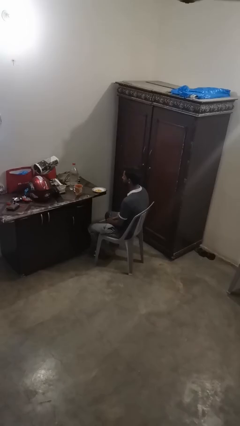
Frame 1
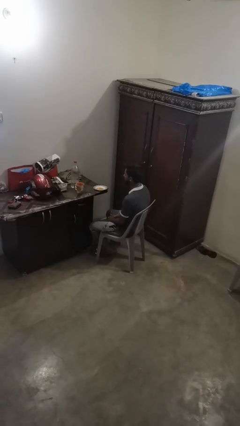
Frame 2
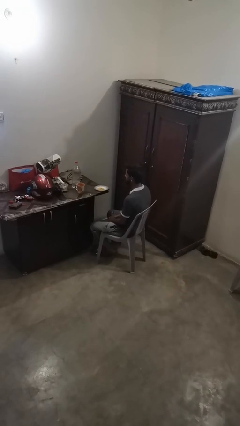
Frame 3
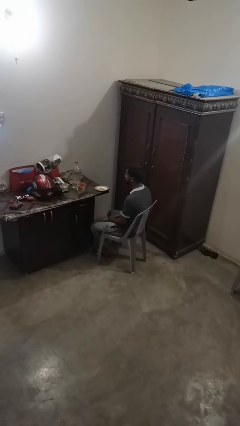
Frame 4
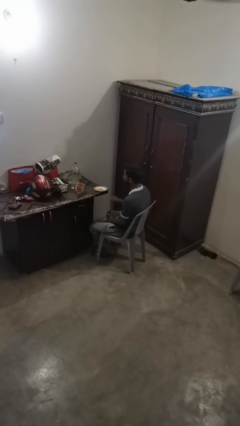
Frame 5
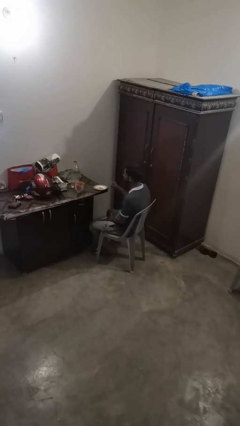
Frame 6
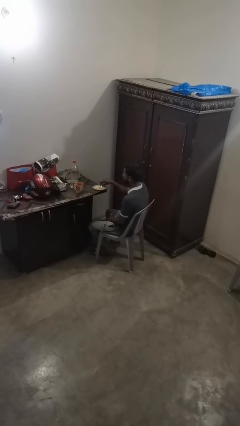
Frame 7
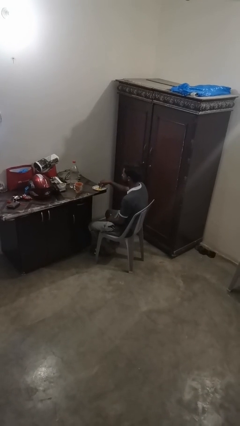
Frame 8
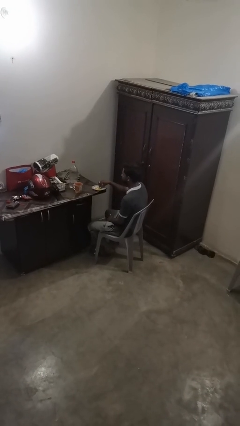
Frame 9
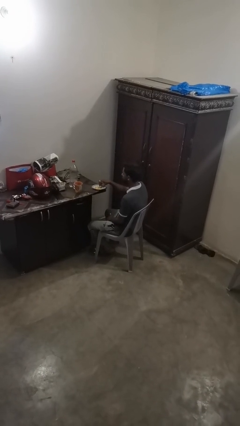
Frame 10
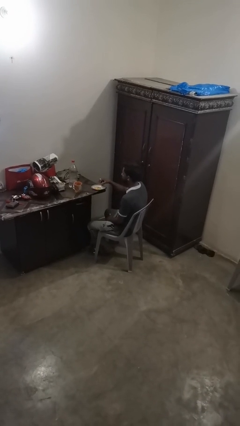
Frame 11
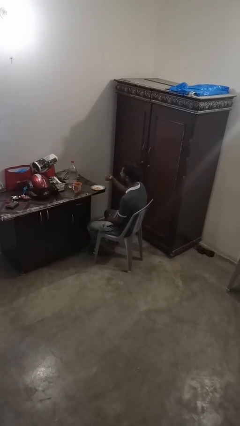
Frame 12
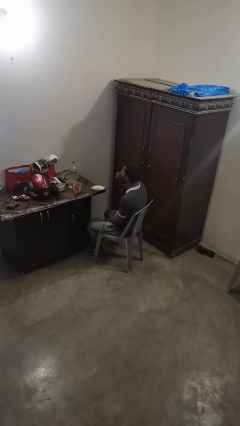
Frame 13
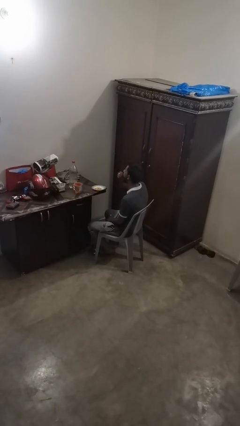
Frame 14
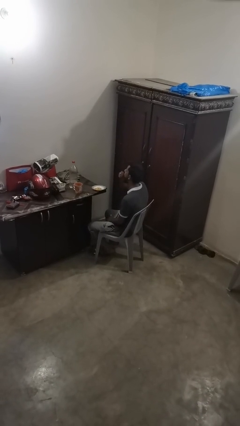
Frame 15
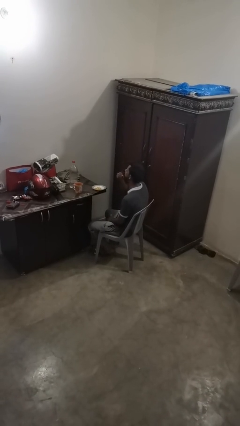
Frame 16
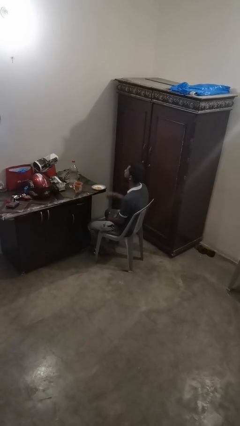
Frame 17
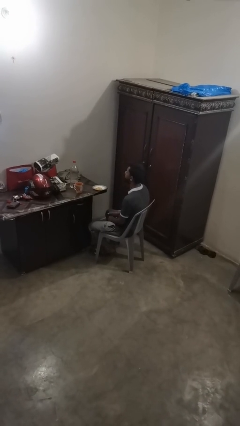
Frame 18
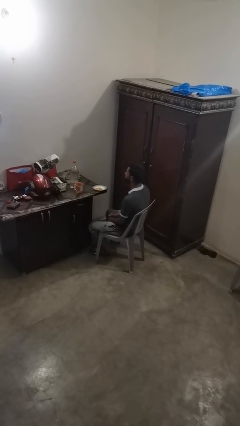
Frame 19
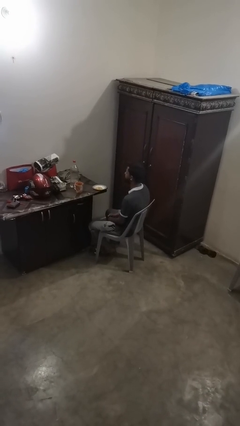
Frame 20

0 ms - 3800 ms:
person eats with hands

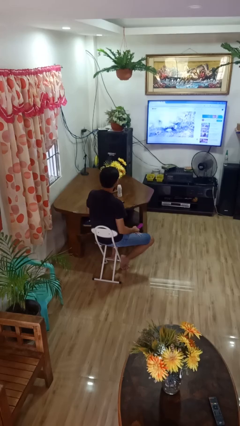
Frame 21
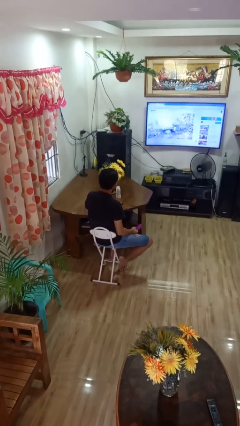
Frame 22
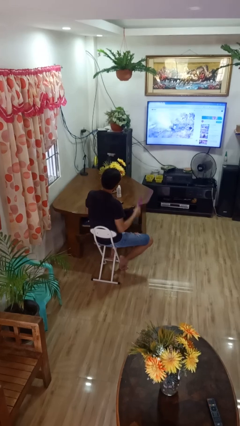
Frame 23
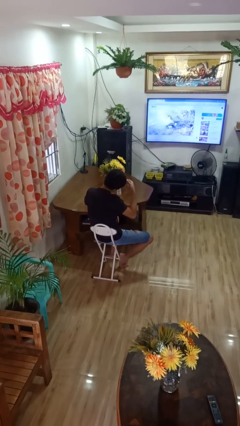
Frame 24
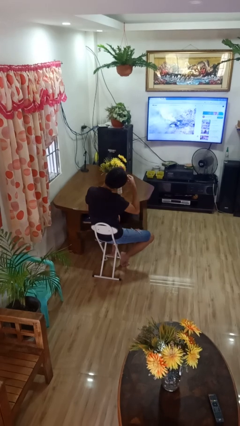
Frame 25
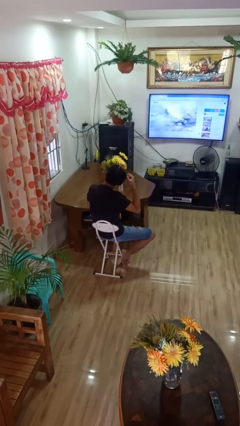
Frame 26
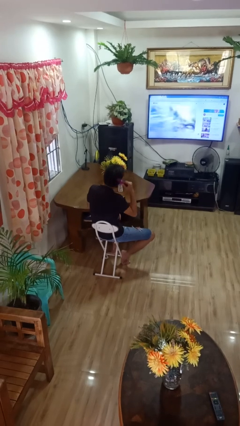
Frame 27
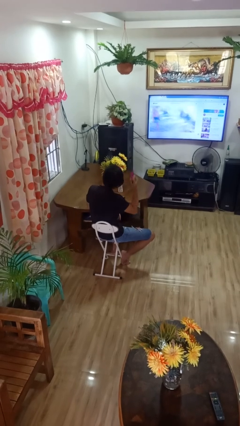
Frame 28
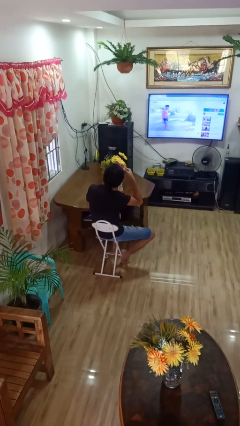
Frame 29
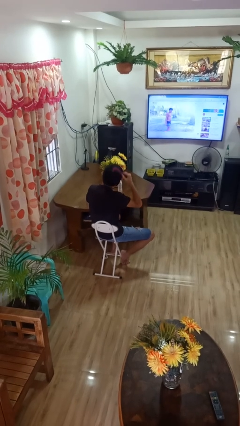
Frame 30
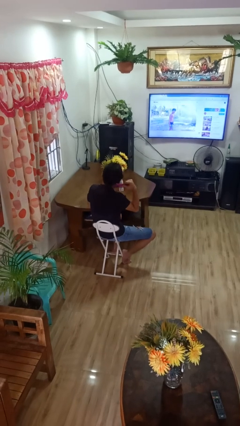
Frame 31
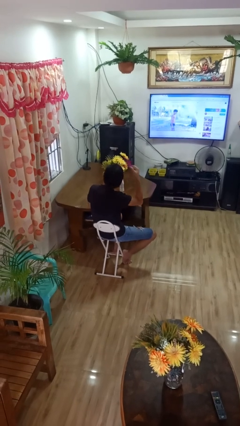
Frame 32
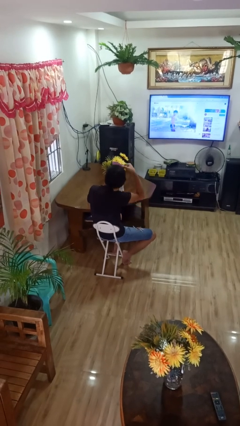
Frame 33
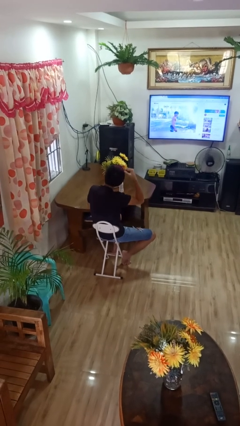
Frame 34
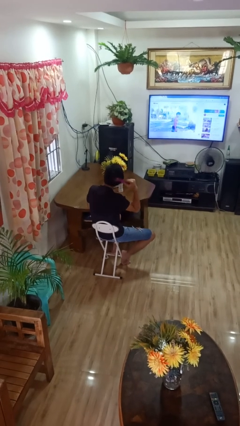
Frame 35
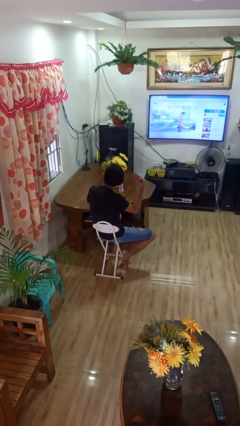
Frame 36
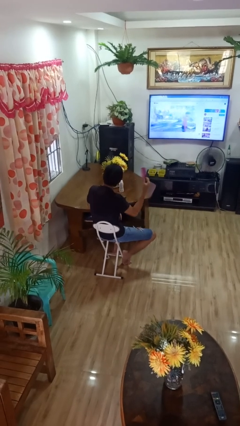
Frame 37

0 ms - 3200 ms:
person brushes hair

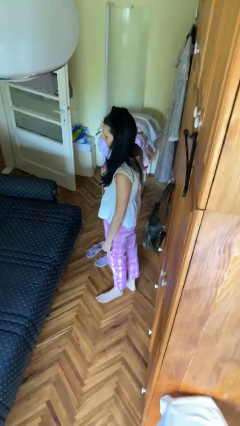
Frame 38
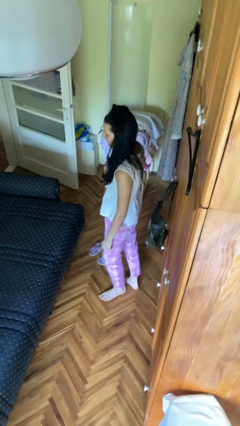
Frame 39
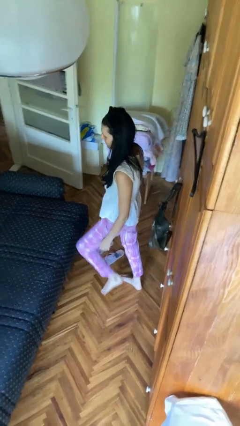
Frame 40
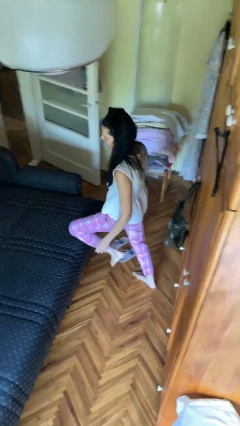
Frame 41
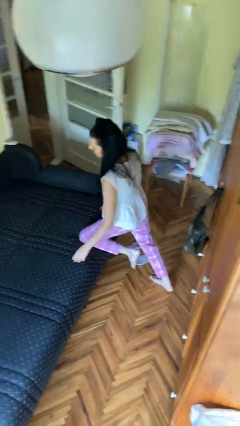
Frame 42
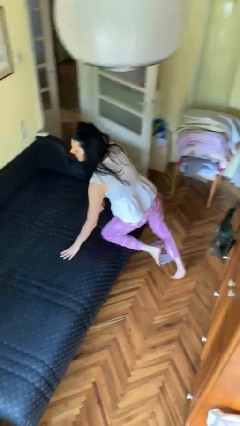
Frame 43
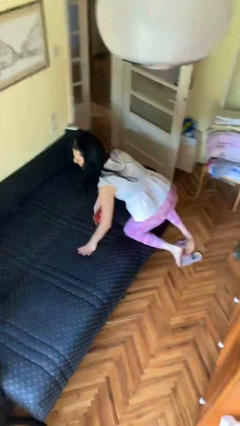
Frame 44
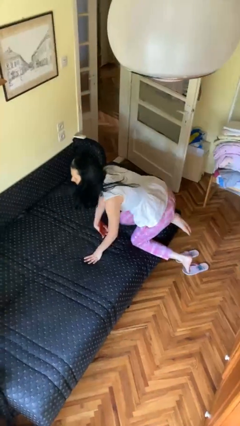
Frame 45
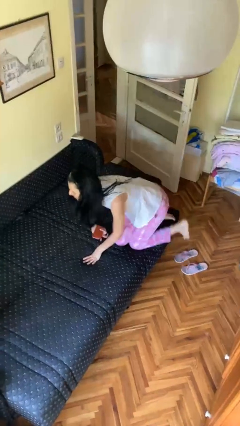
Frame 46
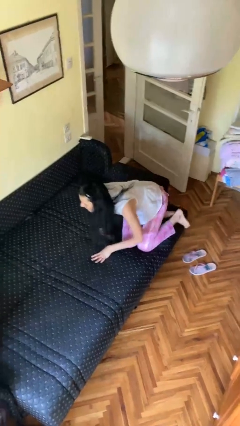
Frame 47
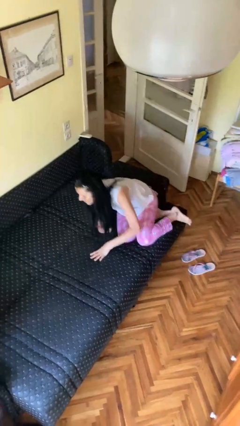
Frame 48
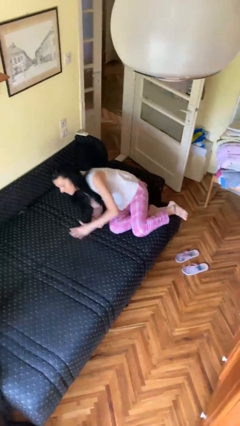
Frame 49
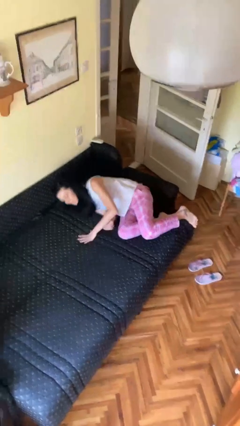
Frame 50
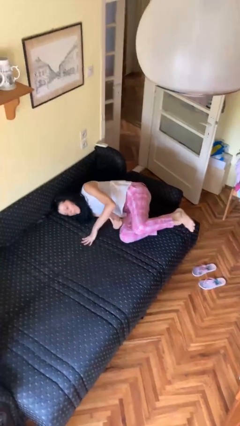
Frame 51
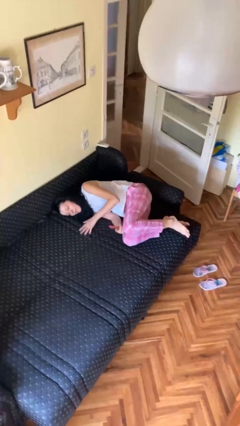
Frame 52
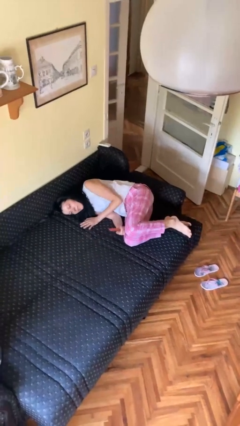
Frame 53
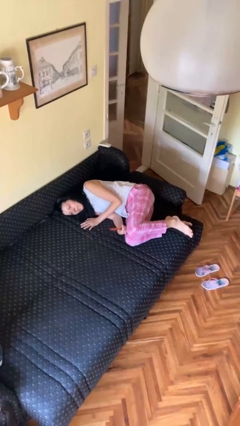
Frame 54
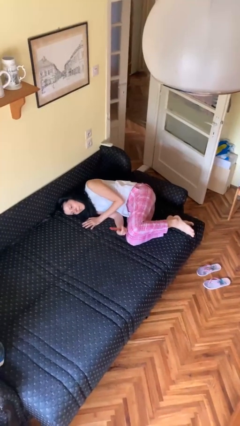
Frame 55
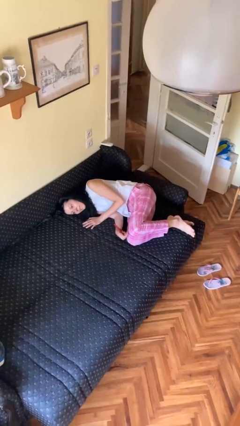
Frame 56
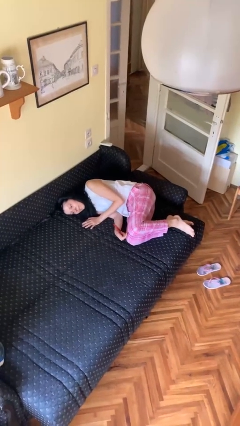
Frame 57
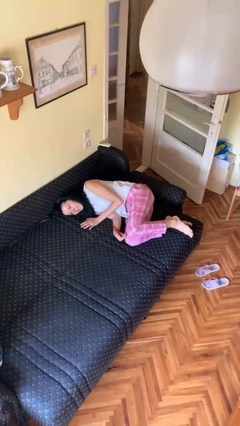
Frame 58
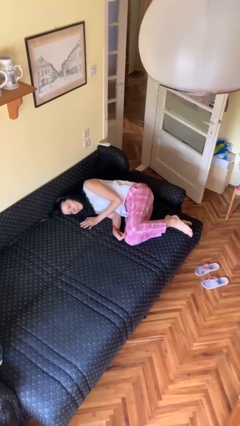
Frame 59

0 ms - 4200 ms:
person lies down on bed

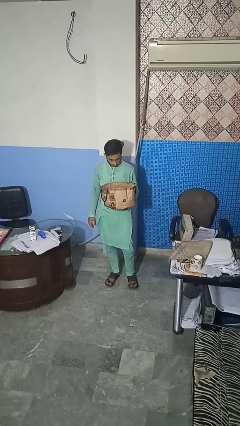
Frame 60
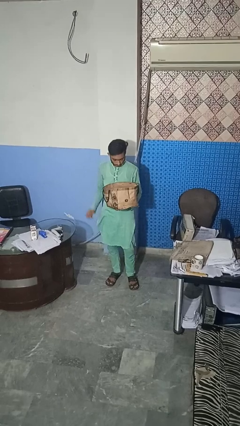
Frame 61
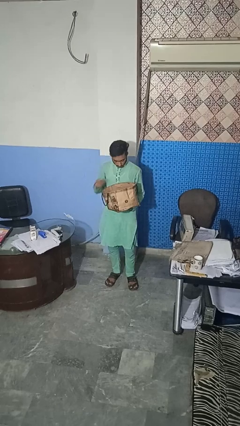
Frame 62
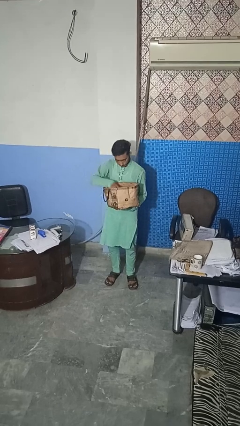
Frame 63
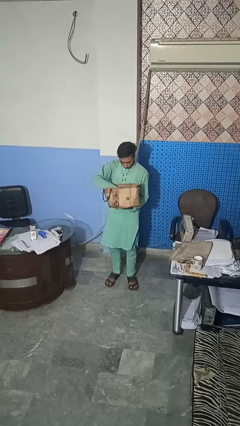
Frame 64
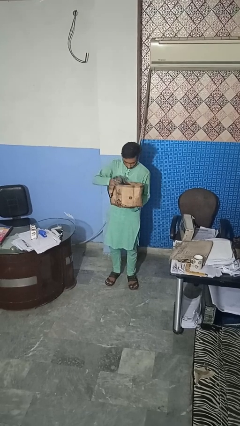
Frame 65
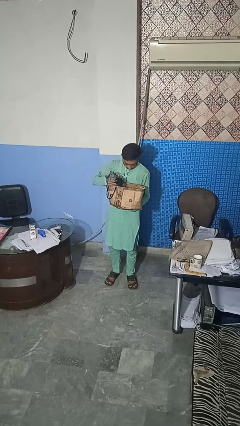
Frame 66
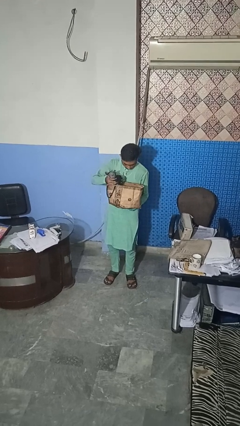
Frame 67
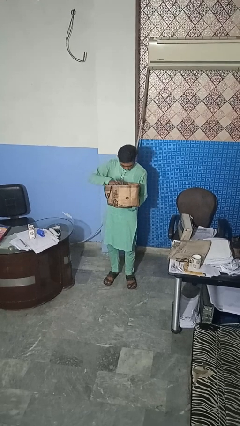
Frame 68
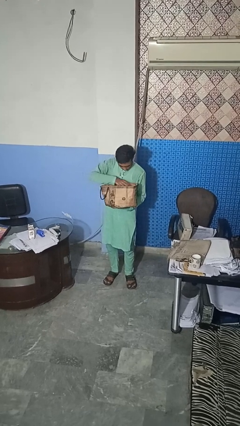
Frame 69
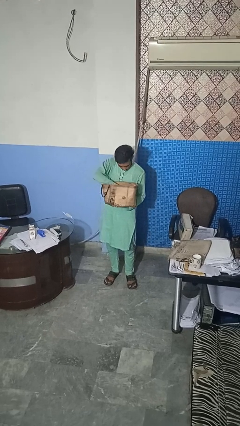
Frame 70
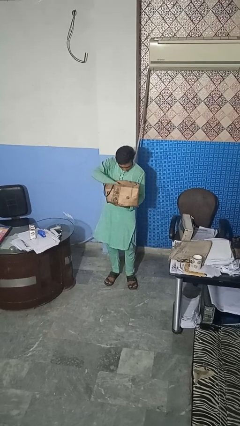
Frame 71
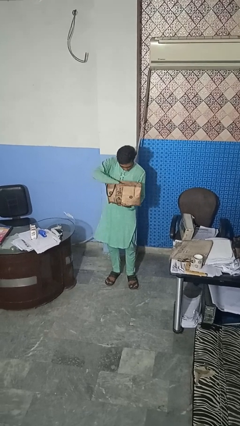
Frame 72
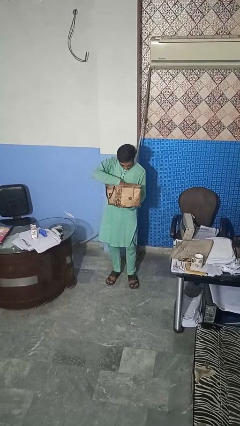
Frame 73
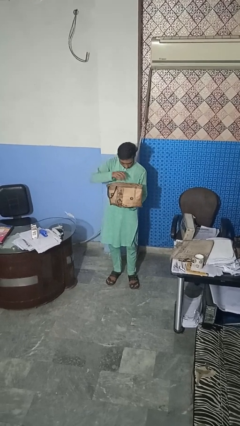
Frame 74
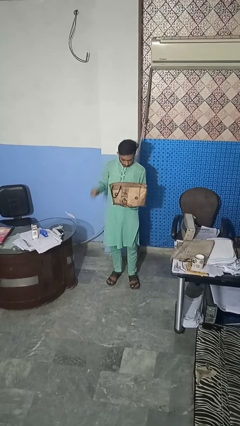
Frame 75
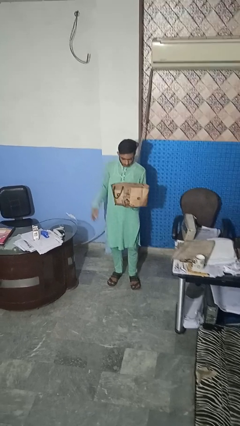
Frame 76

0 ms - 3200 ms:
person searches in bag

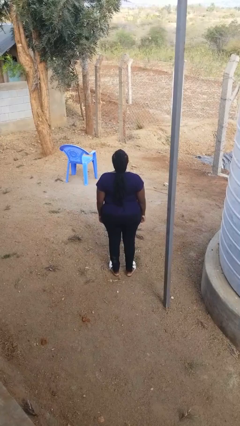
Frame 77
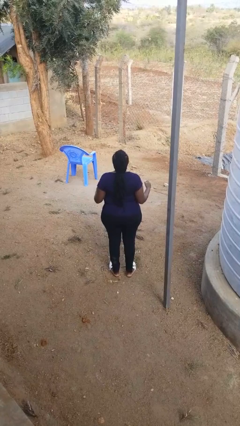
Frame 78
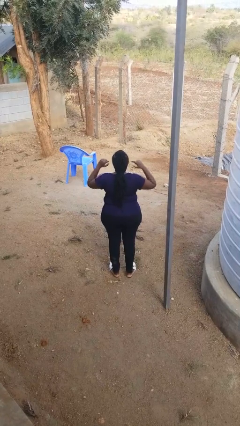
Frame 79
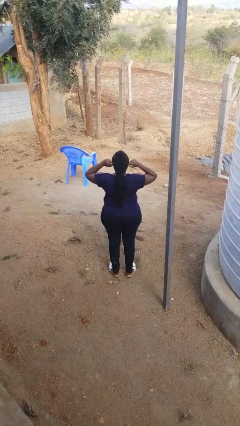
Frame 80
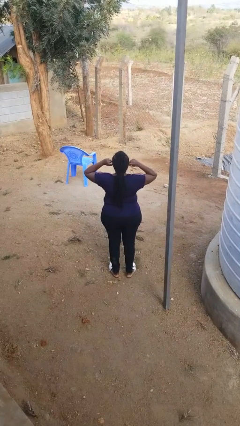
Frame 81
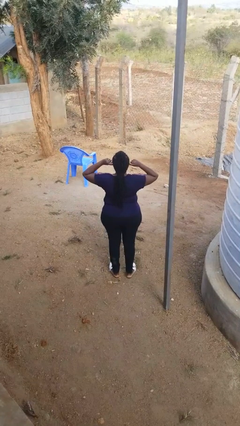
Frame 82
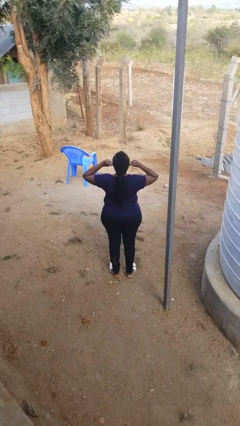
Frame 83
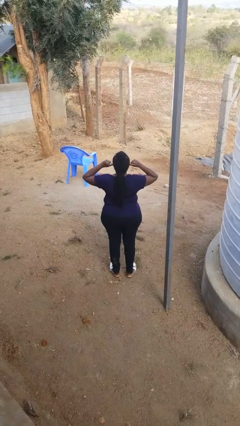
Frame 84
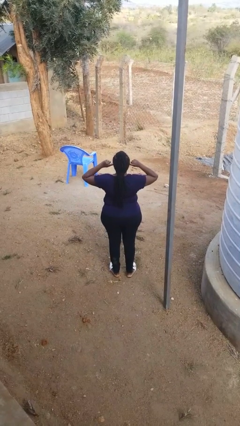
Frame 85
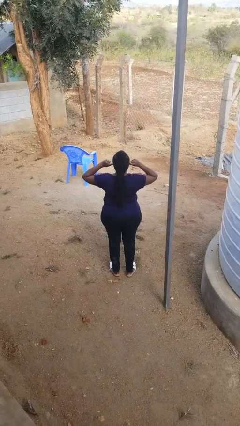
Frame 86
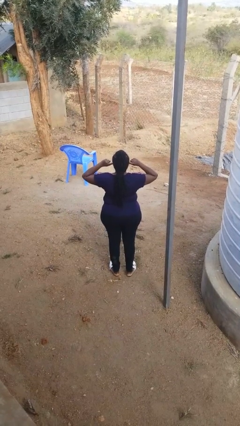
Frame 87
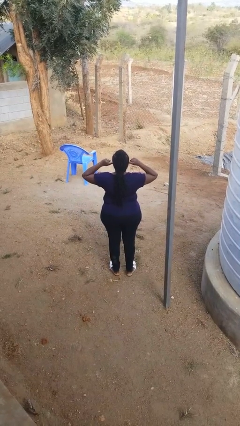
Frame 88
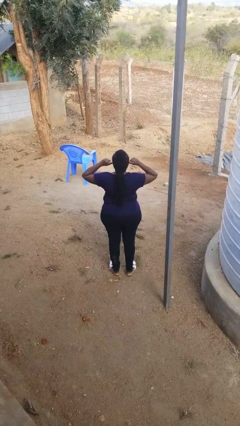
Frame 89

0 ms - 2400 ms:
person puts fingers in ear

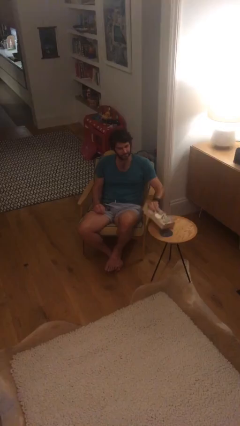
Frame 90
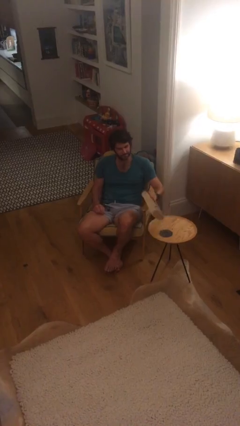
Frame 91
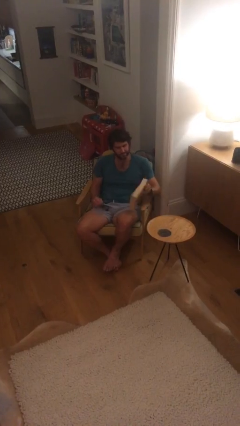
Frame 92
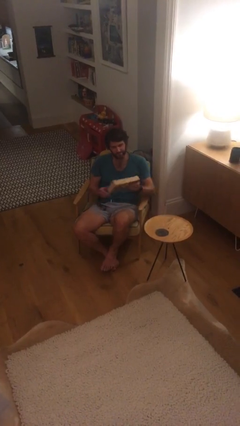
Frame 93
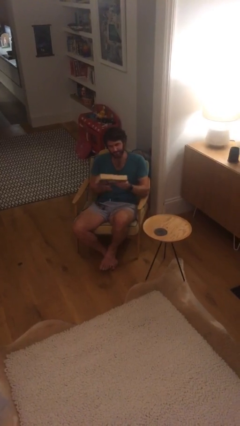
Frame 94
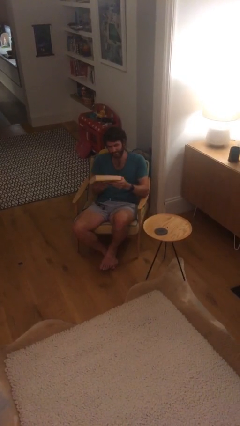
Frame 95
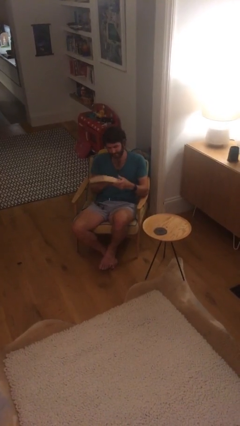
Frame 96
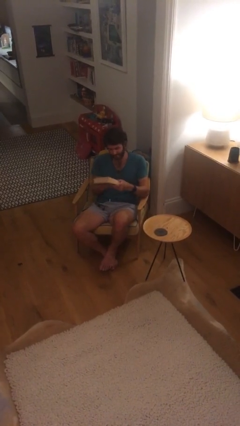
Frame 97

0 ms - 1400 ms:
person picks up object from table
